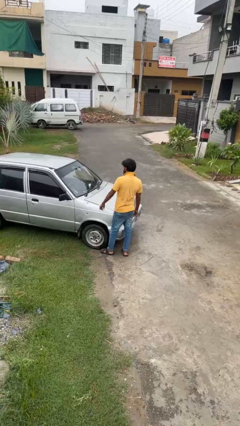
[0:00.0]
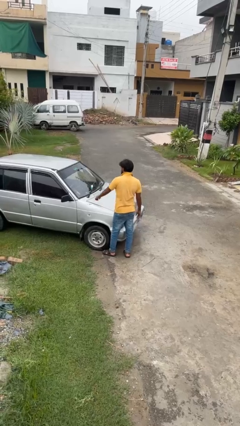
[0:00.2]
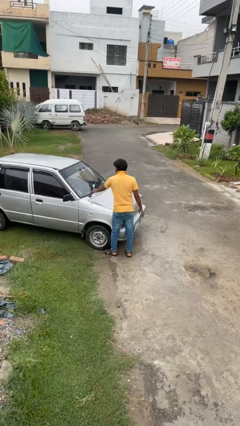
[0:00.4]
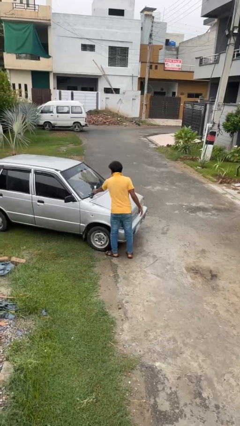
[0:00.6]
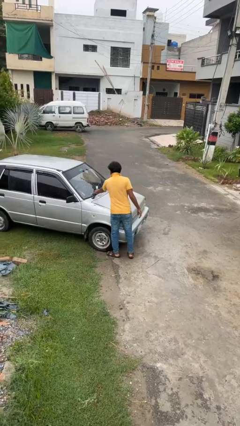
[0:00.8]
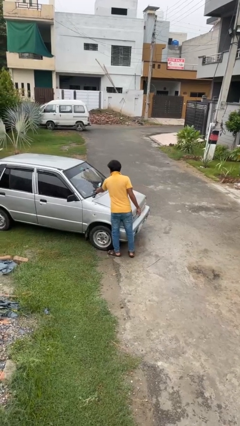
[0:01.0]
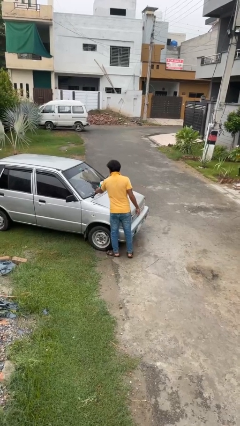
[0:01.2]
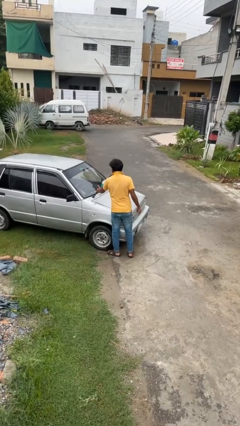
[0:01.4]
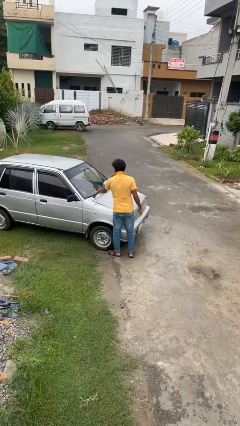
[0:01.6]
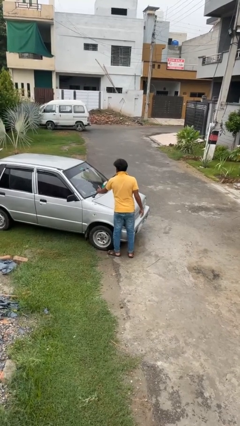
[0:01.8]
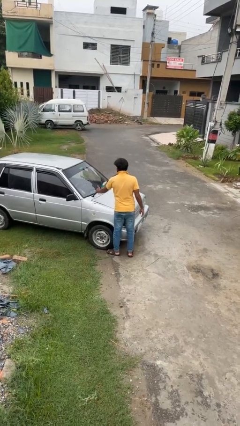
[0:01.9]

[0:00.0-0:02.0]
person flips up car wipers

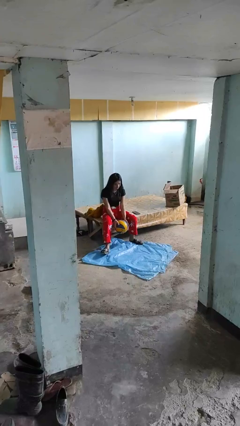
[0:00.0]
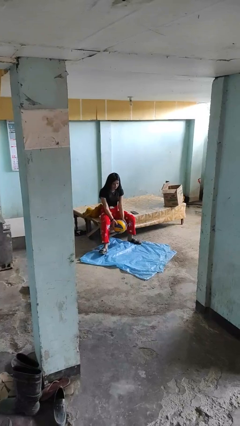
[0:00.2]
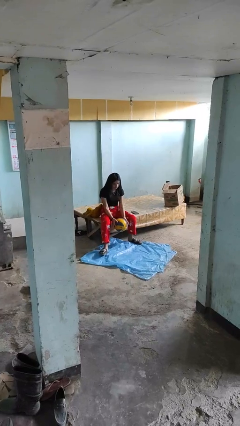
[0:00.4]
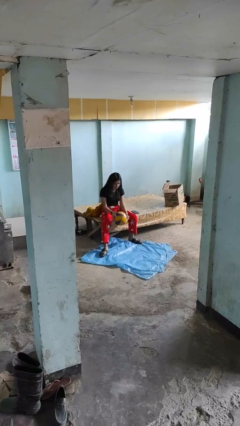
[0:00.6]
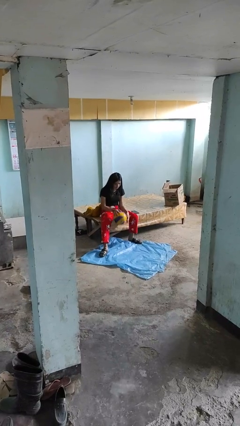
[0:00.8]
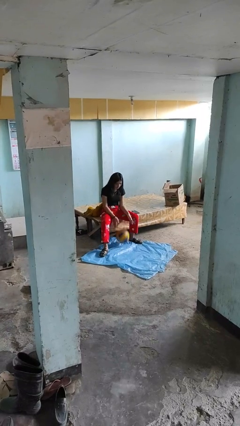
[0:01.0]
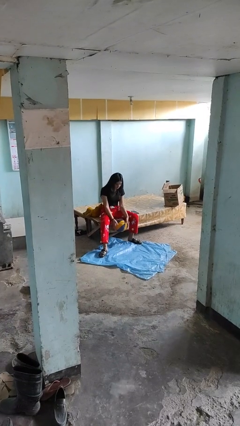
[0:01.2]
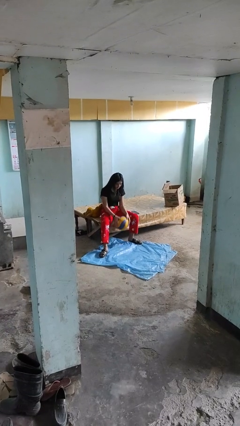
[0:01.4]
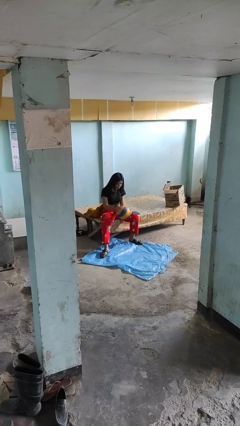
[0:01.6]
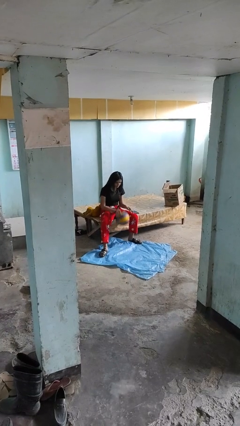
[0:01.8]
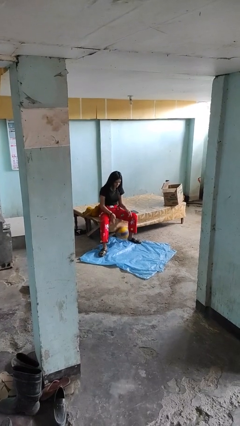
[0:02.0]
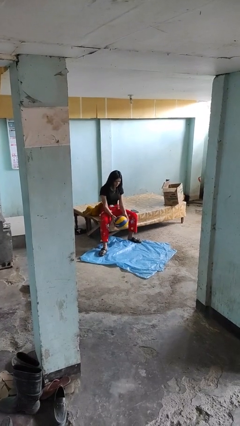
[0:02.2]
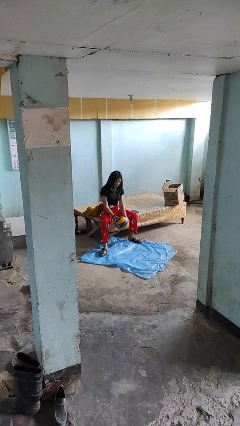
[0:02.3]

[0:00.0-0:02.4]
person bounces ball on floor

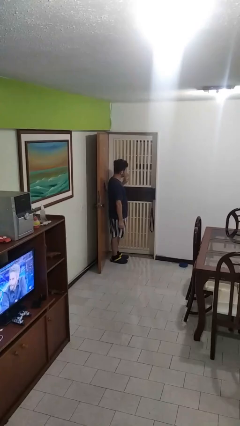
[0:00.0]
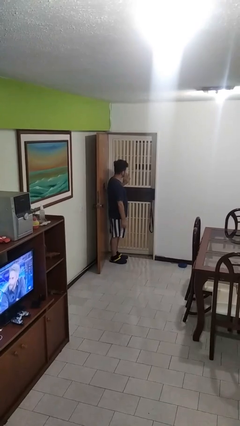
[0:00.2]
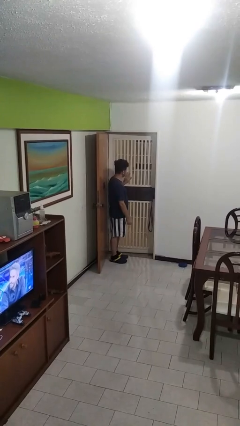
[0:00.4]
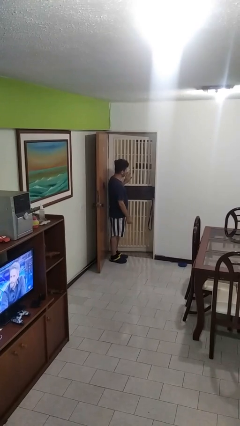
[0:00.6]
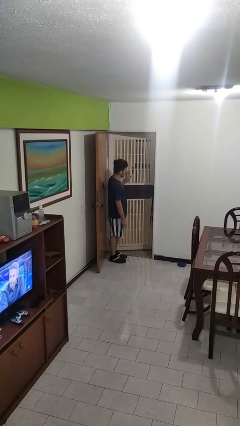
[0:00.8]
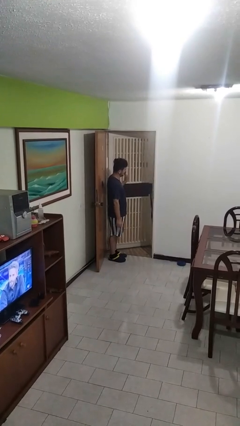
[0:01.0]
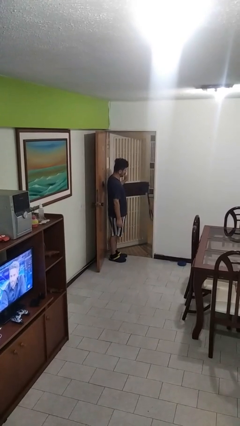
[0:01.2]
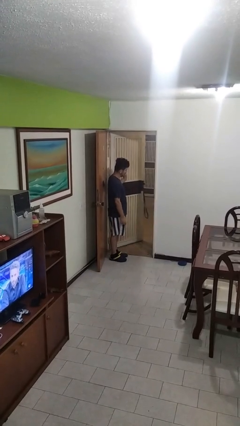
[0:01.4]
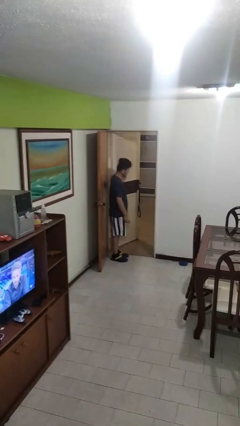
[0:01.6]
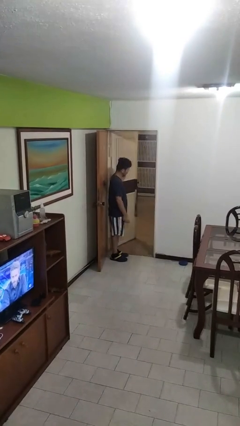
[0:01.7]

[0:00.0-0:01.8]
person opens facility door

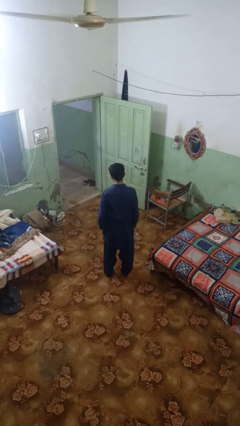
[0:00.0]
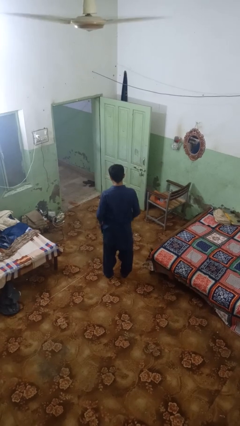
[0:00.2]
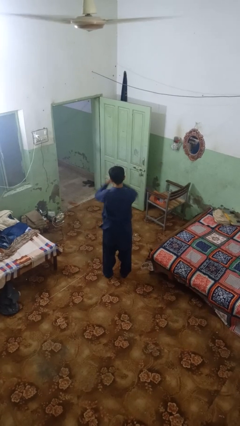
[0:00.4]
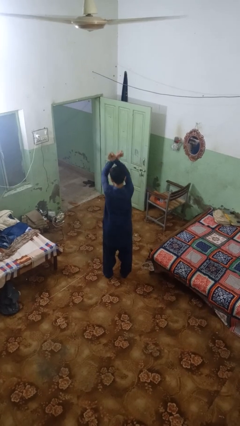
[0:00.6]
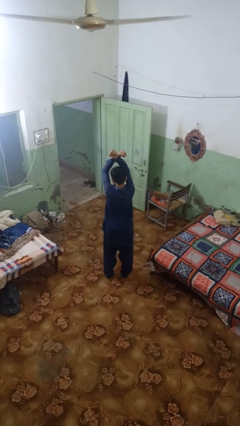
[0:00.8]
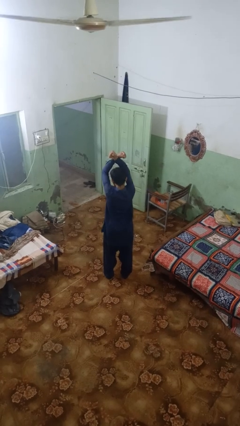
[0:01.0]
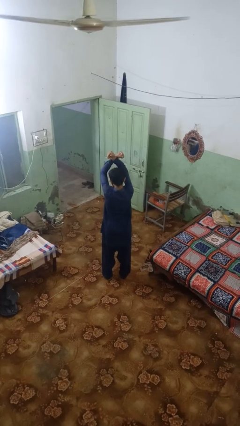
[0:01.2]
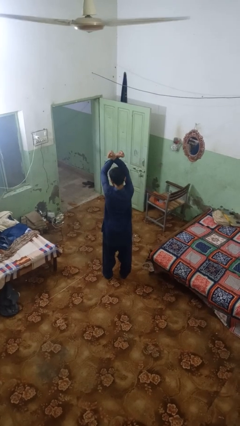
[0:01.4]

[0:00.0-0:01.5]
person crosses arms

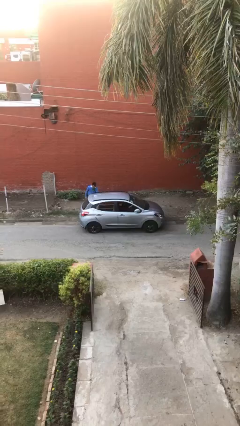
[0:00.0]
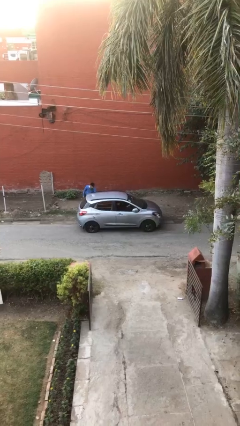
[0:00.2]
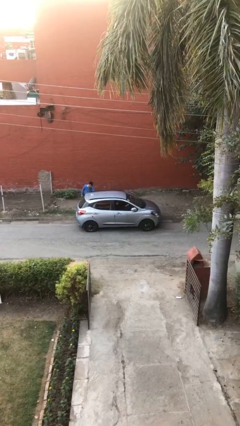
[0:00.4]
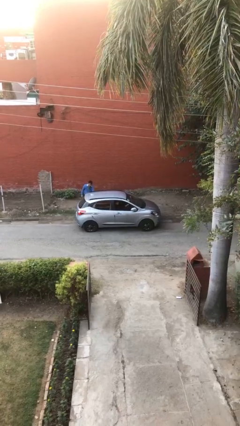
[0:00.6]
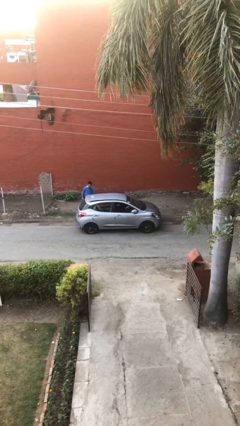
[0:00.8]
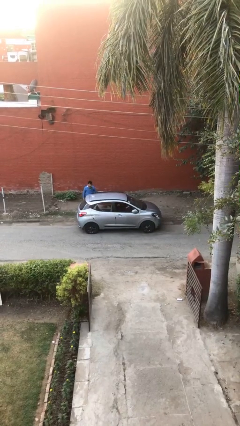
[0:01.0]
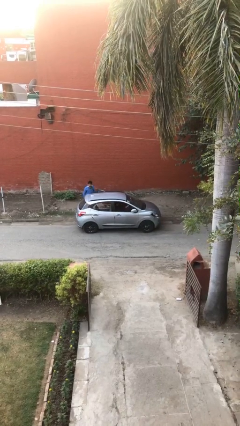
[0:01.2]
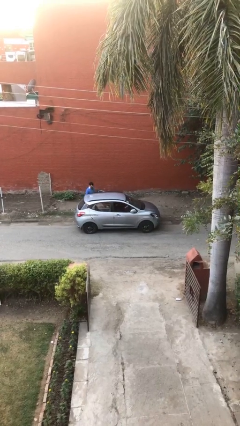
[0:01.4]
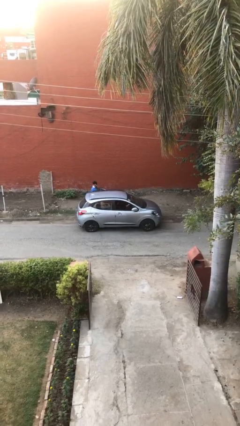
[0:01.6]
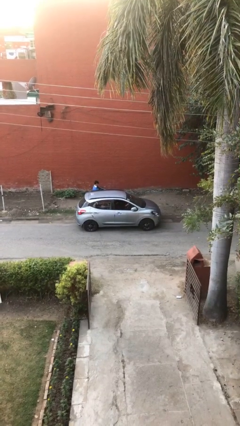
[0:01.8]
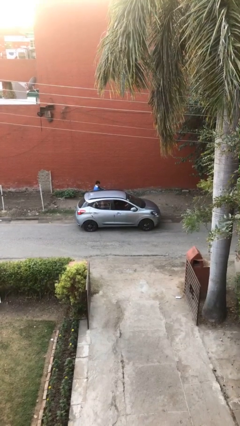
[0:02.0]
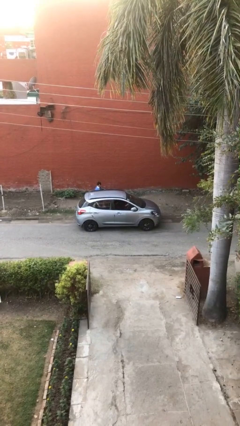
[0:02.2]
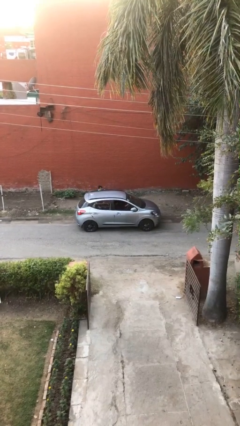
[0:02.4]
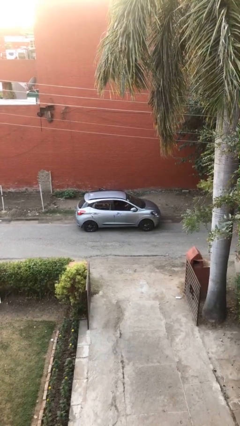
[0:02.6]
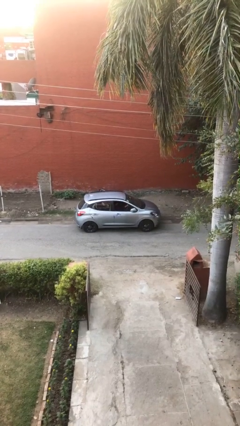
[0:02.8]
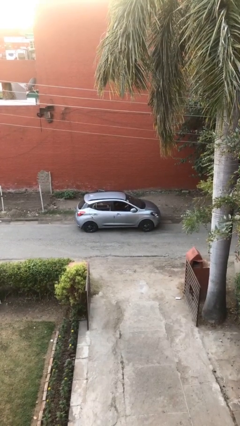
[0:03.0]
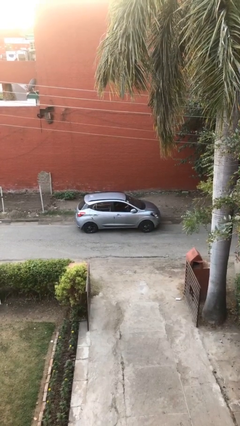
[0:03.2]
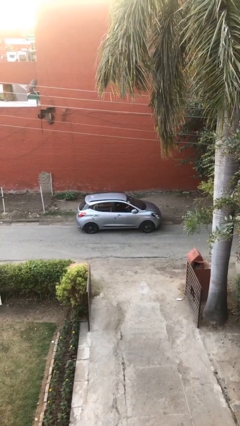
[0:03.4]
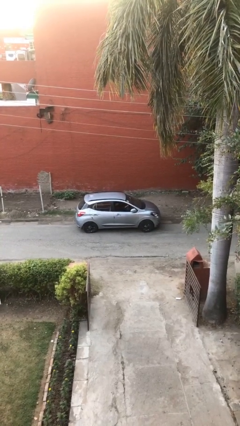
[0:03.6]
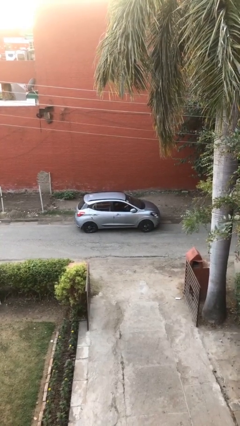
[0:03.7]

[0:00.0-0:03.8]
car picks up person

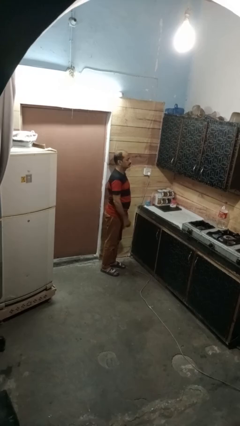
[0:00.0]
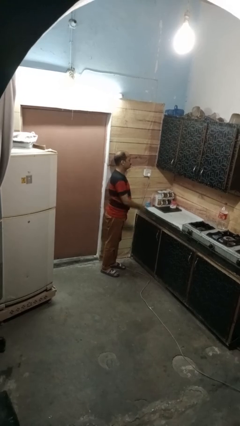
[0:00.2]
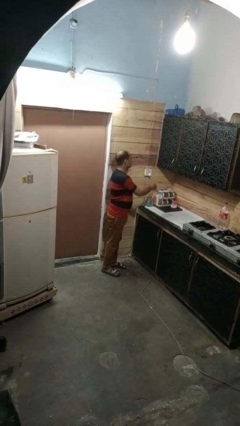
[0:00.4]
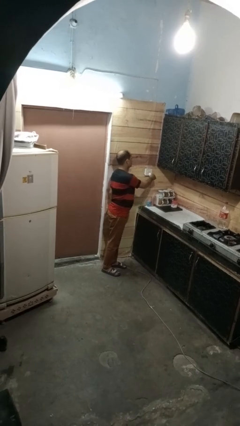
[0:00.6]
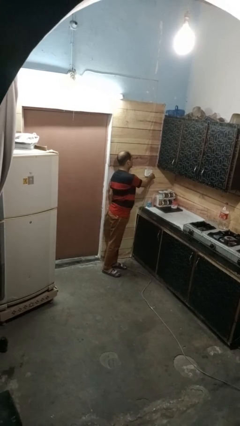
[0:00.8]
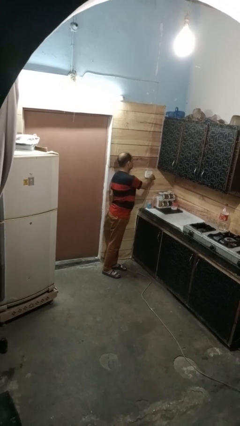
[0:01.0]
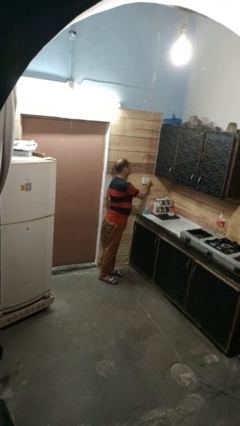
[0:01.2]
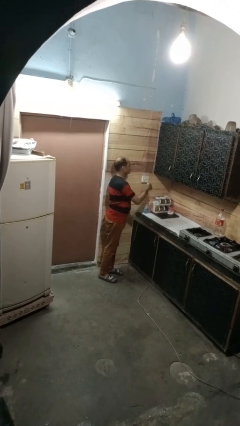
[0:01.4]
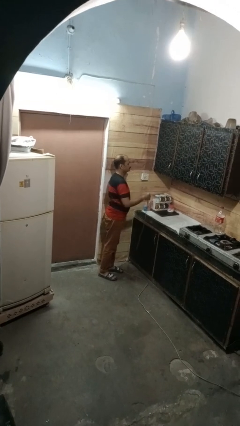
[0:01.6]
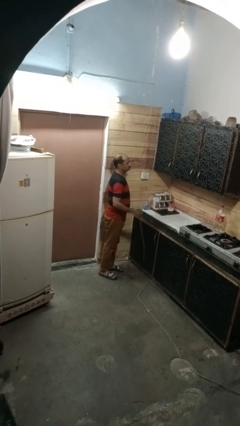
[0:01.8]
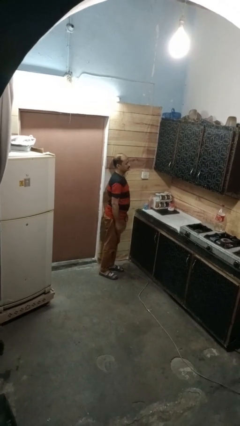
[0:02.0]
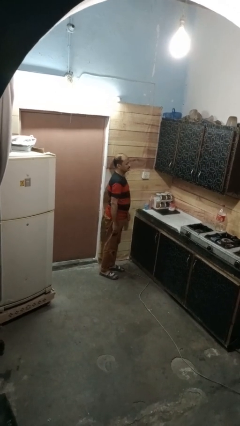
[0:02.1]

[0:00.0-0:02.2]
person unplugs from electrical socket

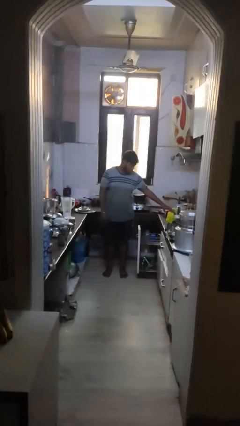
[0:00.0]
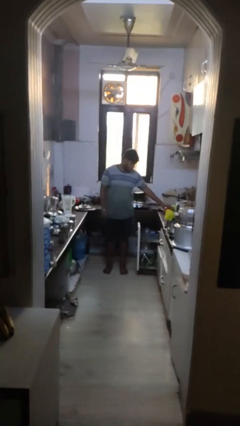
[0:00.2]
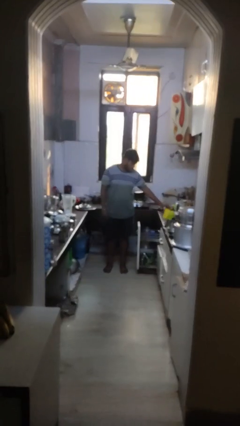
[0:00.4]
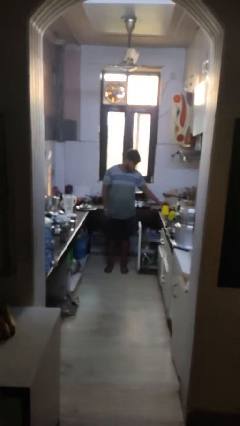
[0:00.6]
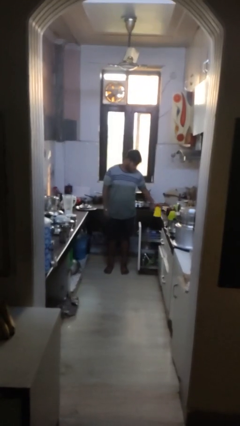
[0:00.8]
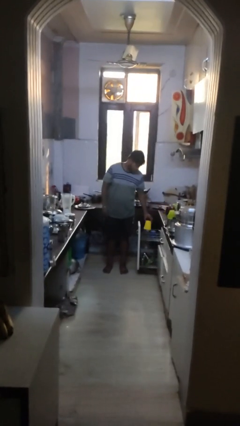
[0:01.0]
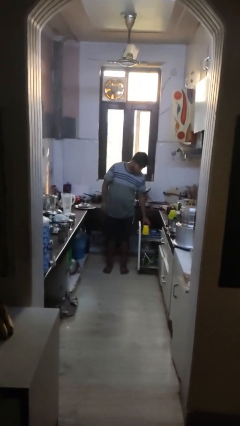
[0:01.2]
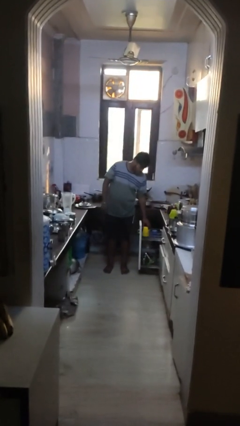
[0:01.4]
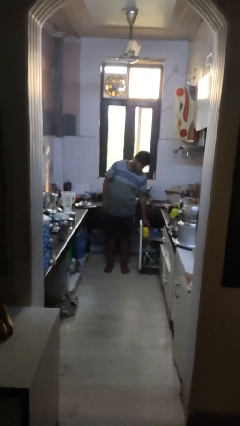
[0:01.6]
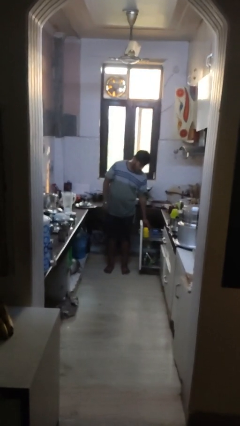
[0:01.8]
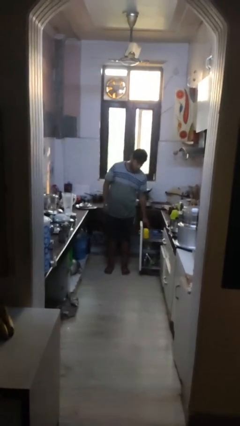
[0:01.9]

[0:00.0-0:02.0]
person loads dishwasher

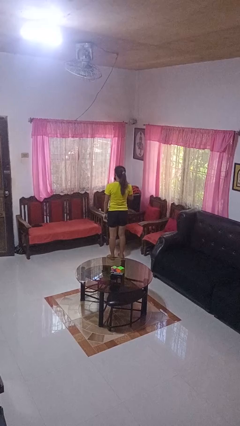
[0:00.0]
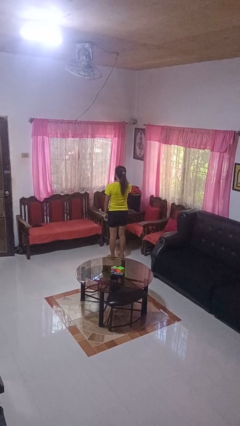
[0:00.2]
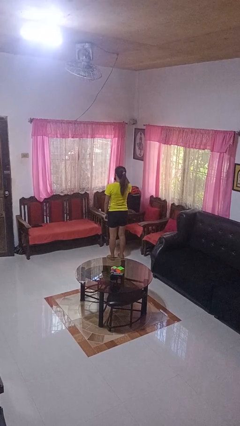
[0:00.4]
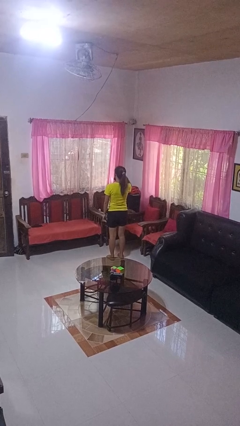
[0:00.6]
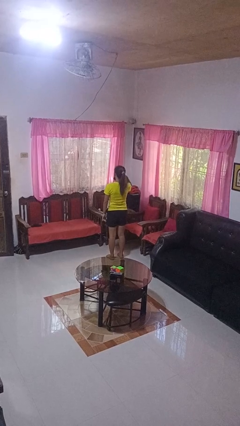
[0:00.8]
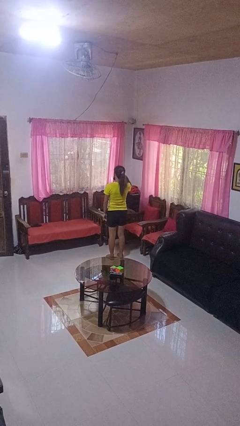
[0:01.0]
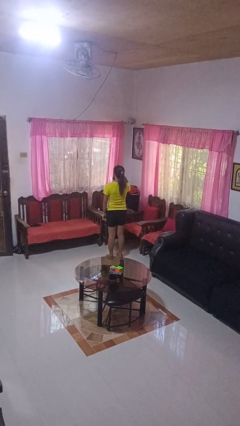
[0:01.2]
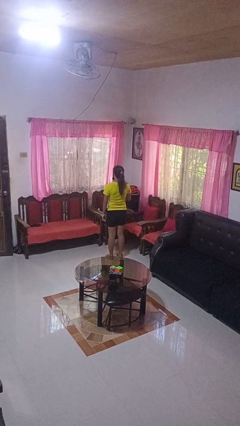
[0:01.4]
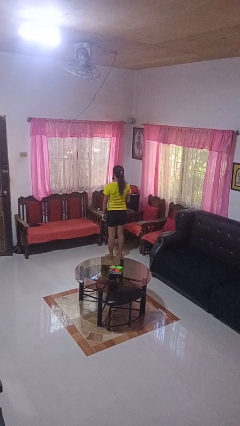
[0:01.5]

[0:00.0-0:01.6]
person gestures call me
